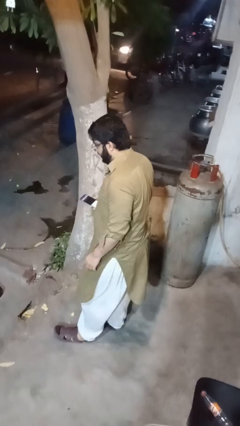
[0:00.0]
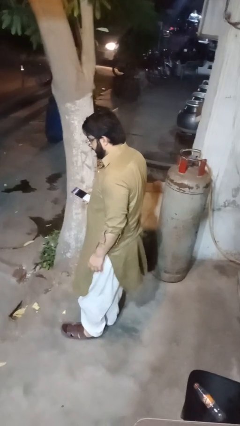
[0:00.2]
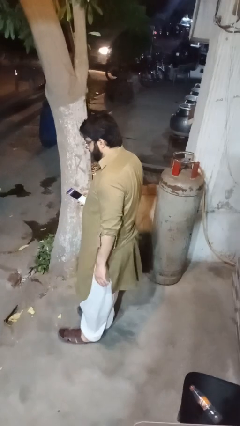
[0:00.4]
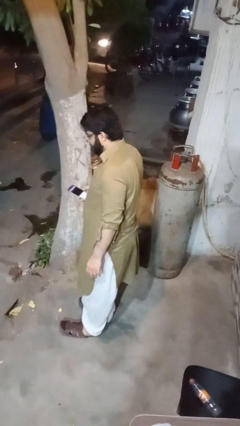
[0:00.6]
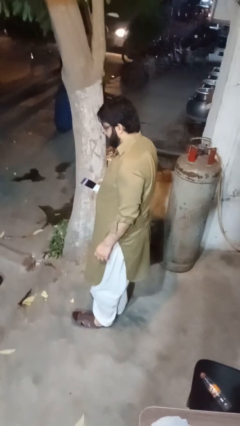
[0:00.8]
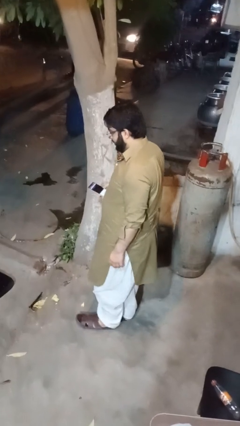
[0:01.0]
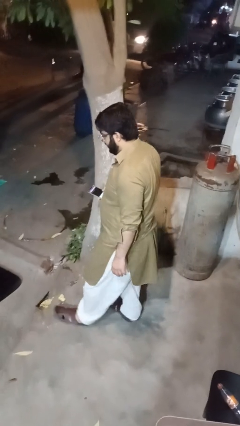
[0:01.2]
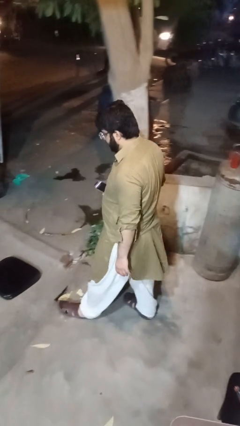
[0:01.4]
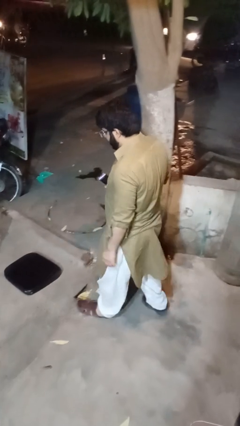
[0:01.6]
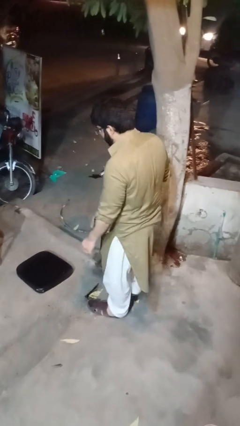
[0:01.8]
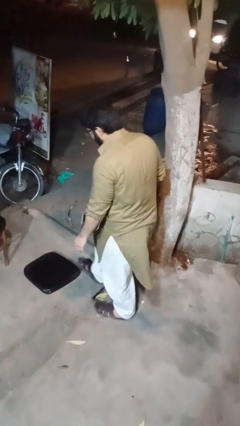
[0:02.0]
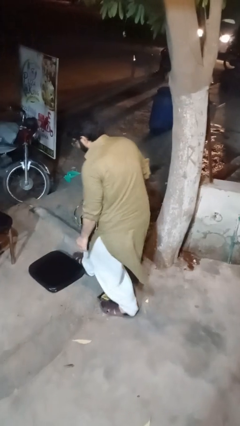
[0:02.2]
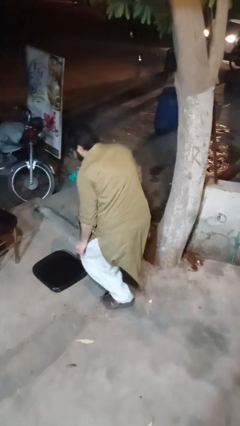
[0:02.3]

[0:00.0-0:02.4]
person trips on object on floor

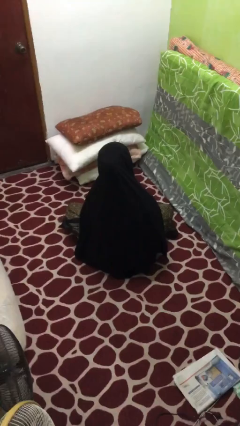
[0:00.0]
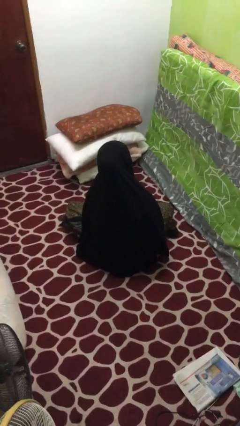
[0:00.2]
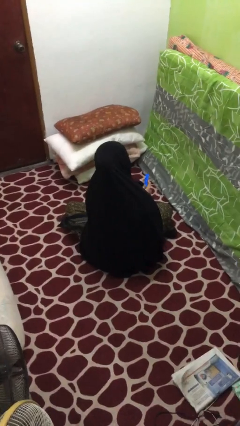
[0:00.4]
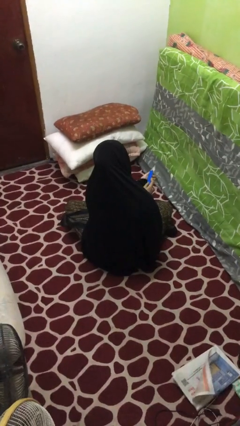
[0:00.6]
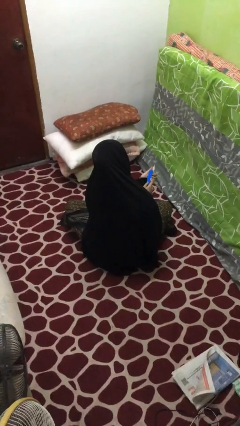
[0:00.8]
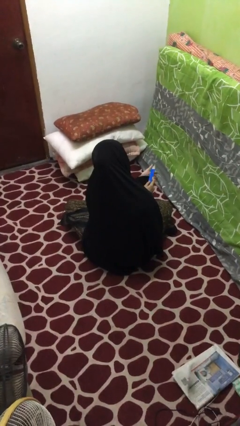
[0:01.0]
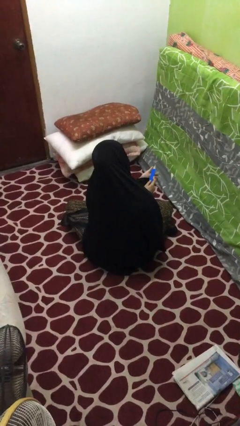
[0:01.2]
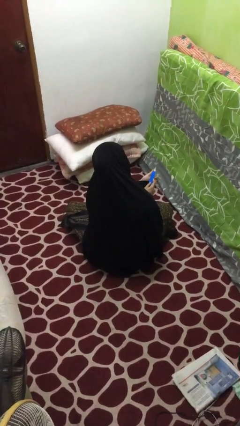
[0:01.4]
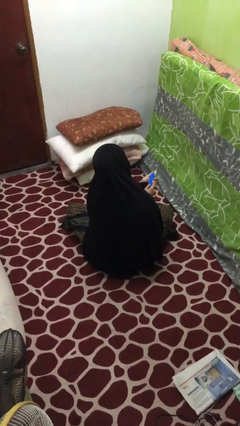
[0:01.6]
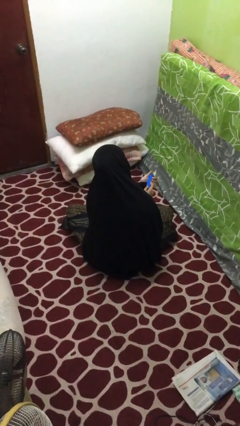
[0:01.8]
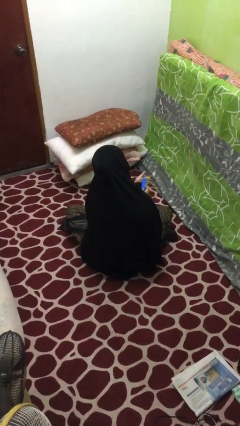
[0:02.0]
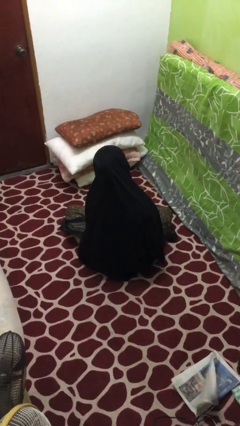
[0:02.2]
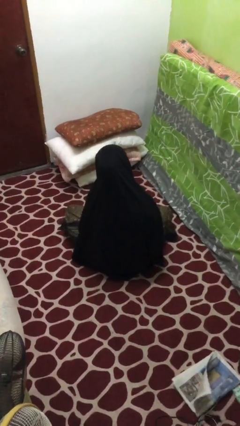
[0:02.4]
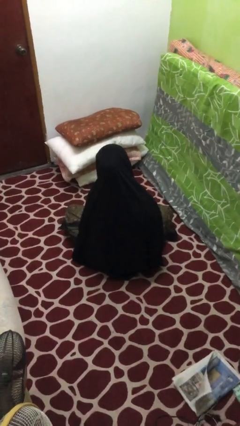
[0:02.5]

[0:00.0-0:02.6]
person files fingernails

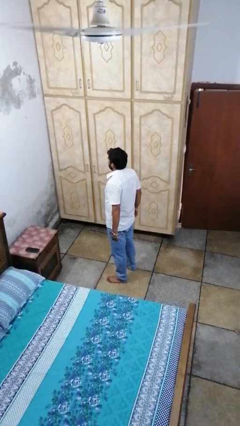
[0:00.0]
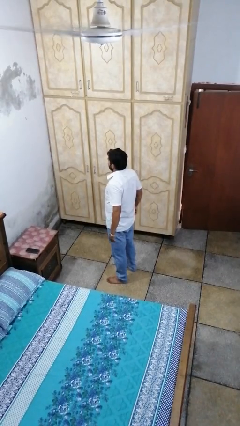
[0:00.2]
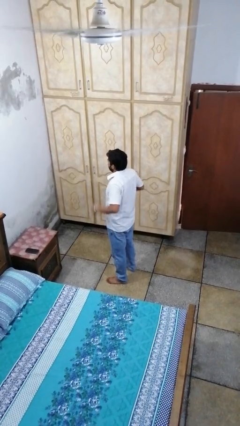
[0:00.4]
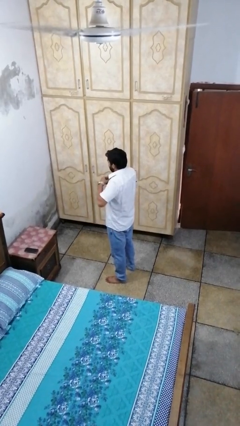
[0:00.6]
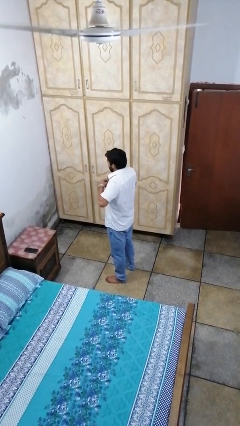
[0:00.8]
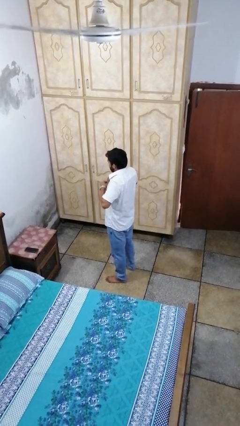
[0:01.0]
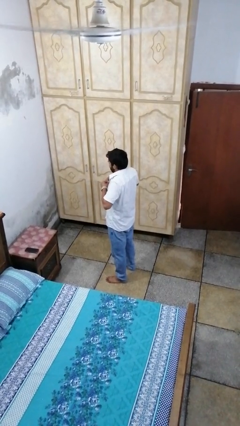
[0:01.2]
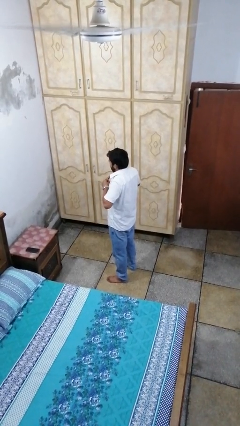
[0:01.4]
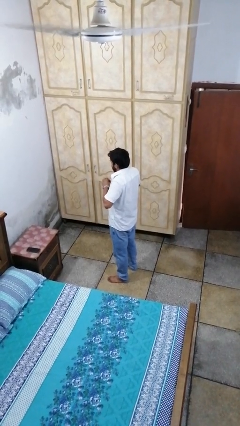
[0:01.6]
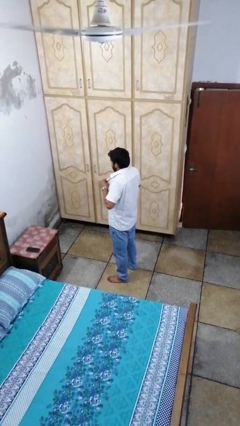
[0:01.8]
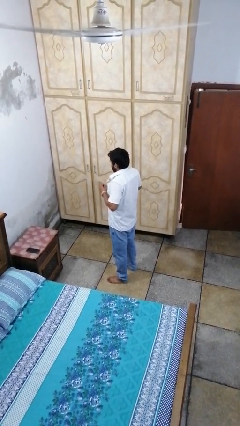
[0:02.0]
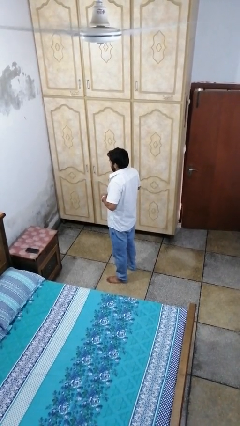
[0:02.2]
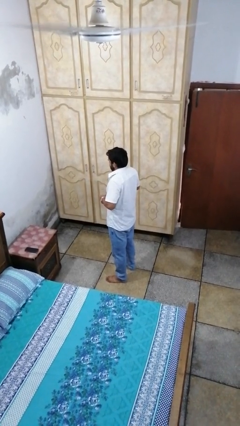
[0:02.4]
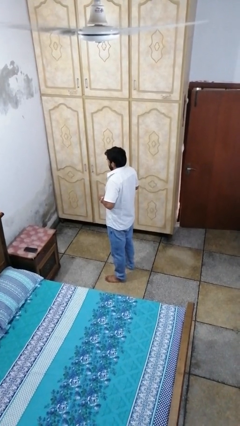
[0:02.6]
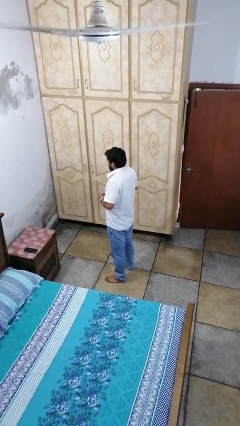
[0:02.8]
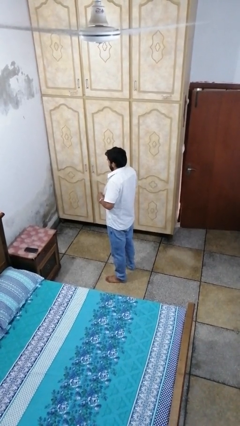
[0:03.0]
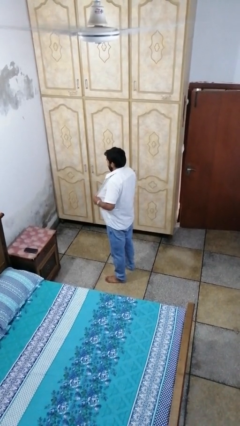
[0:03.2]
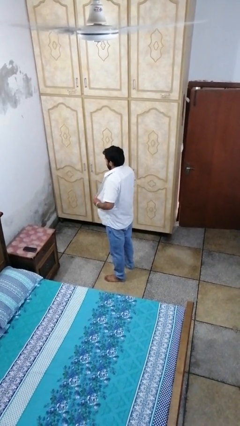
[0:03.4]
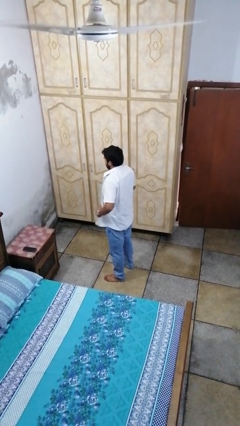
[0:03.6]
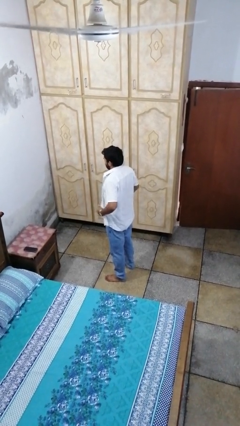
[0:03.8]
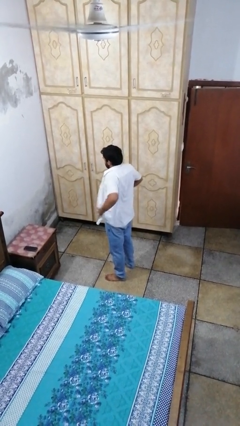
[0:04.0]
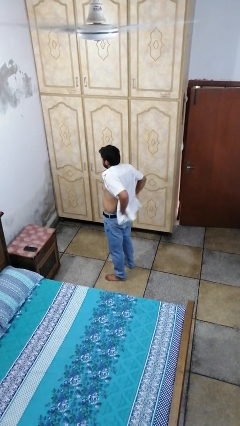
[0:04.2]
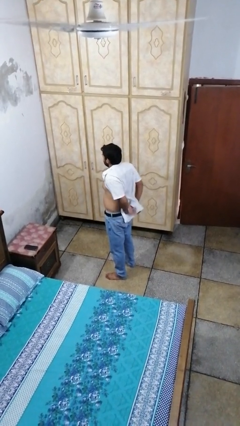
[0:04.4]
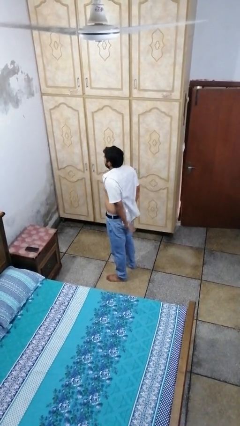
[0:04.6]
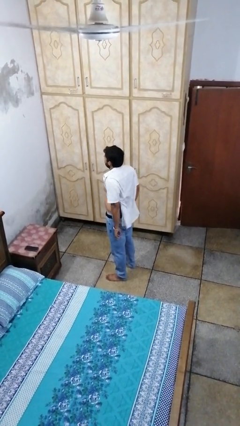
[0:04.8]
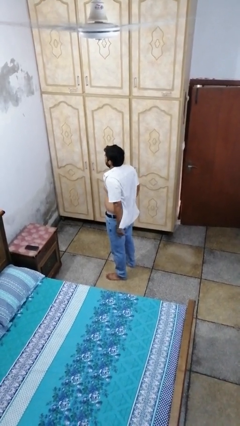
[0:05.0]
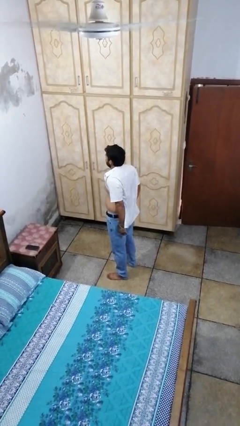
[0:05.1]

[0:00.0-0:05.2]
person unbuttons shirt

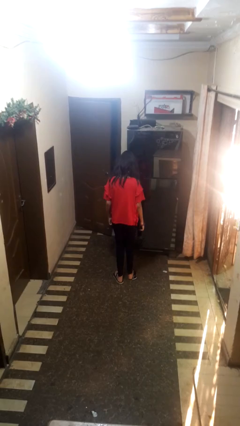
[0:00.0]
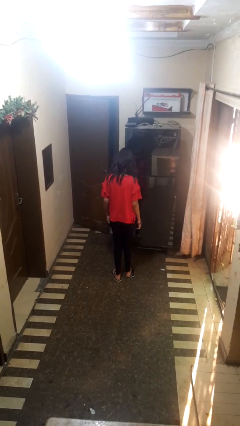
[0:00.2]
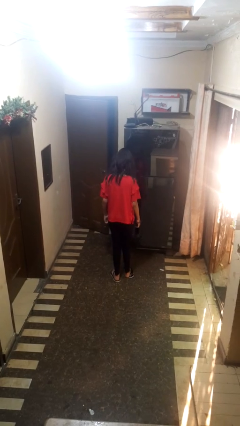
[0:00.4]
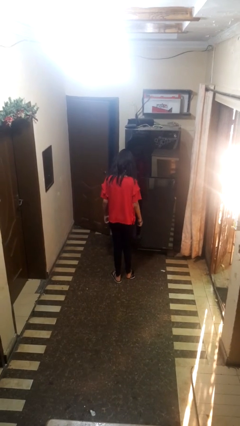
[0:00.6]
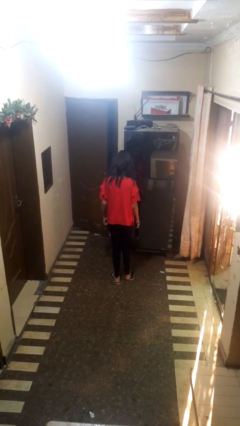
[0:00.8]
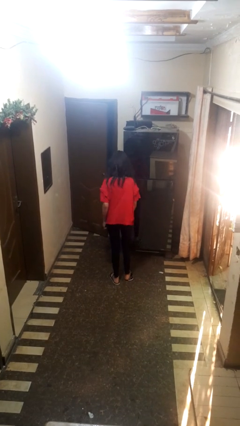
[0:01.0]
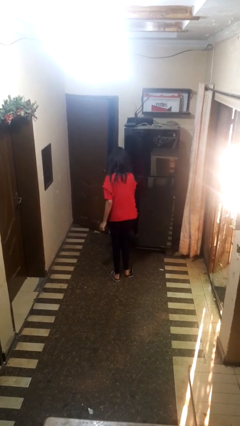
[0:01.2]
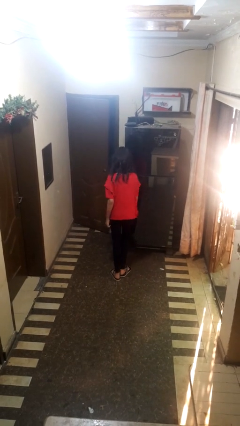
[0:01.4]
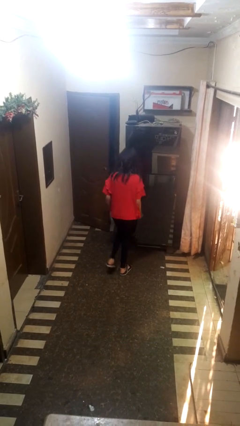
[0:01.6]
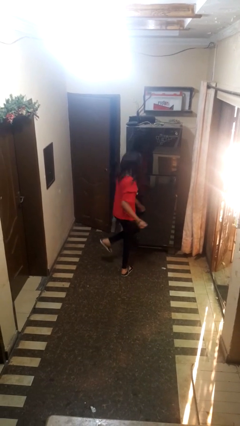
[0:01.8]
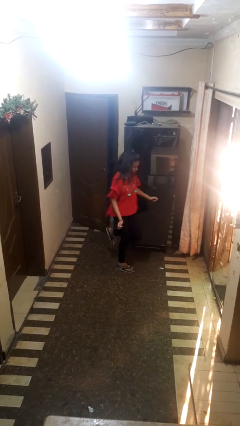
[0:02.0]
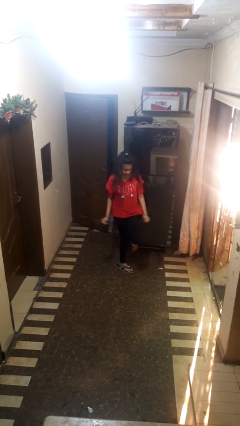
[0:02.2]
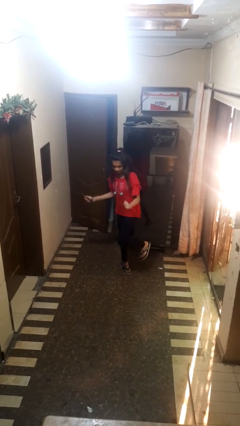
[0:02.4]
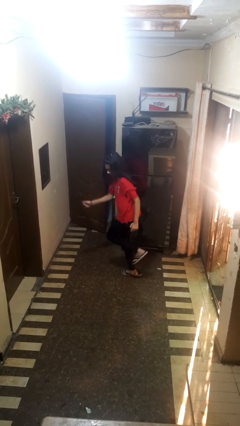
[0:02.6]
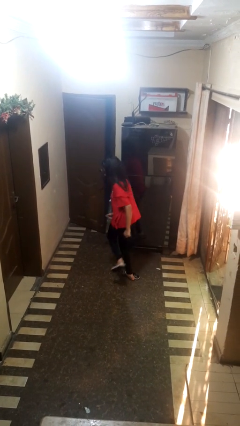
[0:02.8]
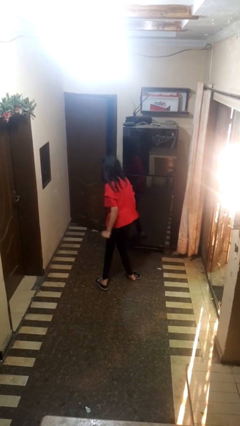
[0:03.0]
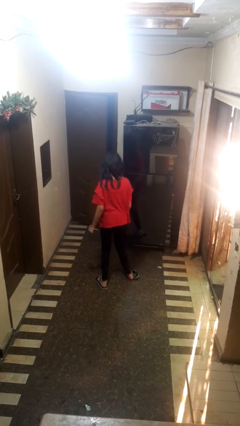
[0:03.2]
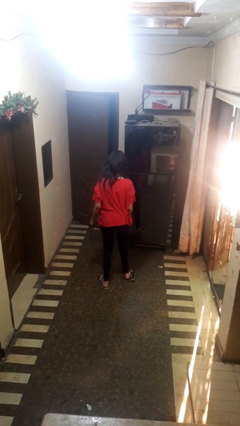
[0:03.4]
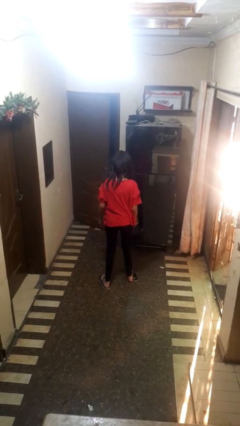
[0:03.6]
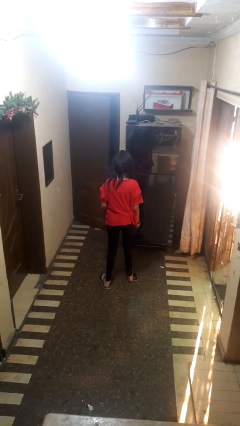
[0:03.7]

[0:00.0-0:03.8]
person twirls

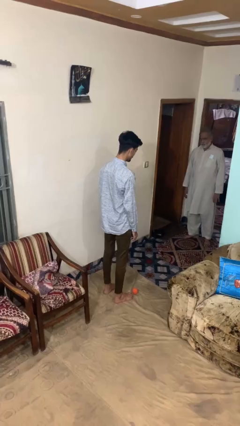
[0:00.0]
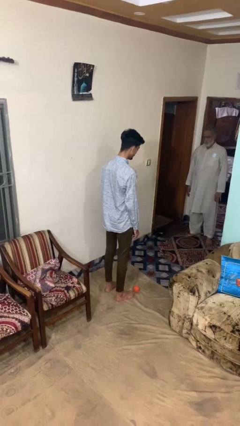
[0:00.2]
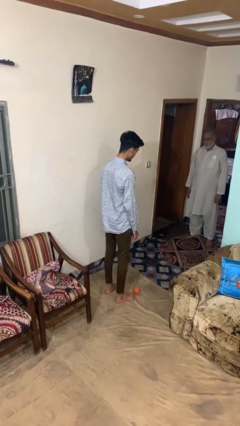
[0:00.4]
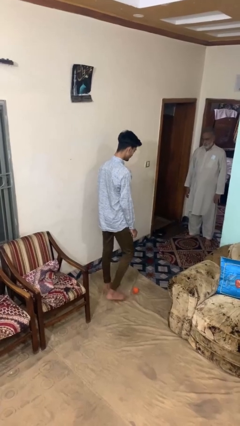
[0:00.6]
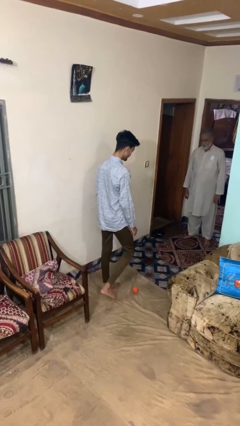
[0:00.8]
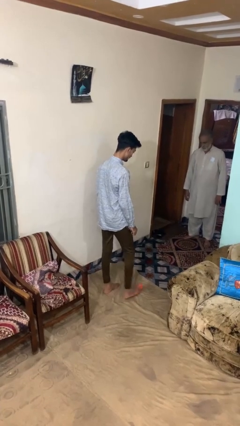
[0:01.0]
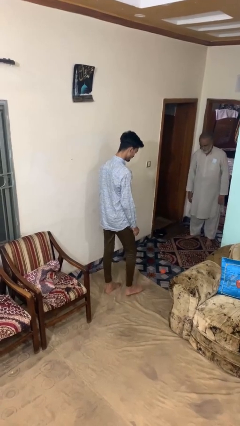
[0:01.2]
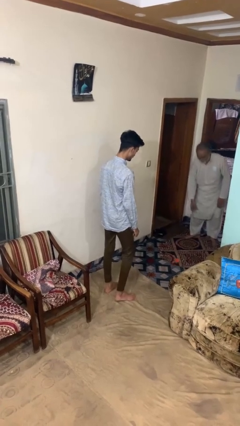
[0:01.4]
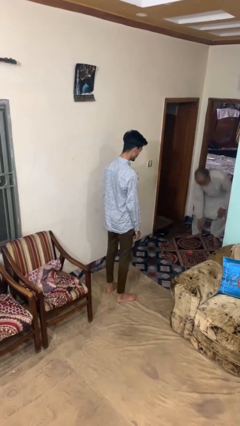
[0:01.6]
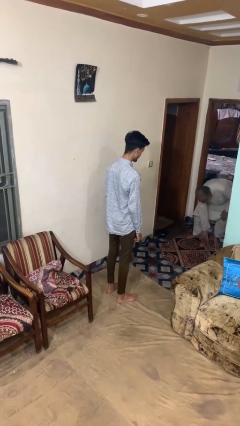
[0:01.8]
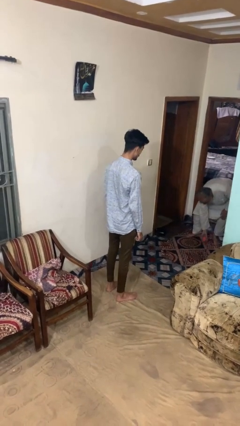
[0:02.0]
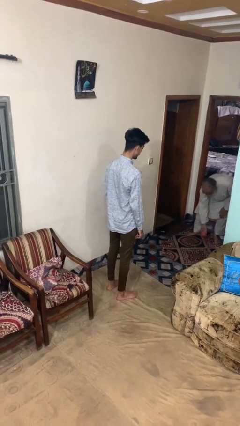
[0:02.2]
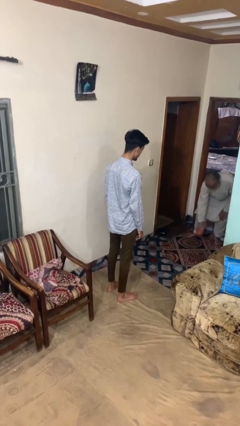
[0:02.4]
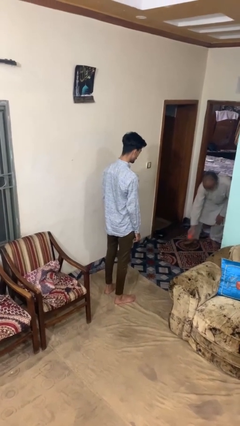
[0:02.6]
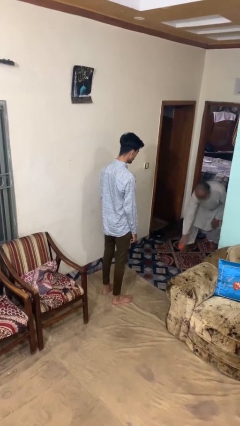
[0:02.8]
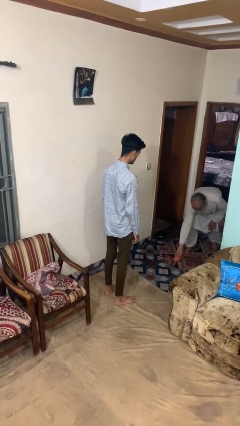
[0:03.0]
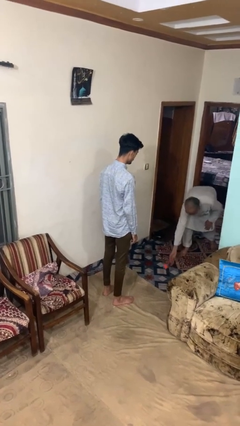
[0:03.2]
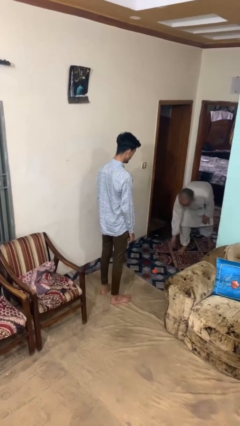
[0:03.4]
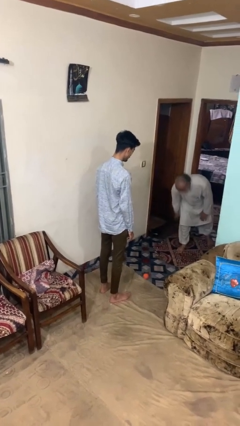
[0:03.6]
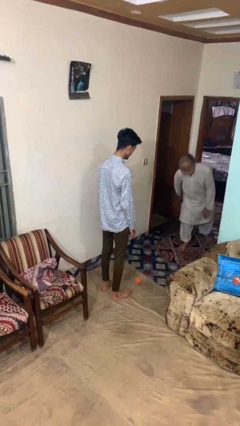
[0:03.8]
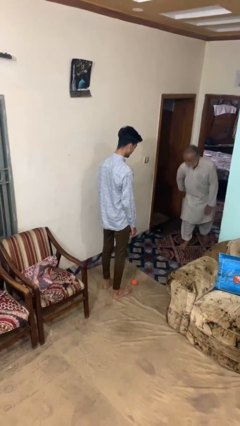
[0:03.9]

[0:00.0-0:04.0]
person kicks object to person
